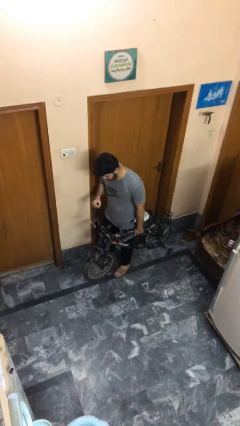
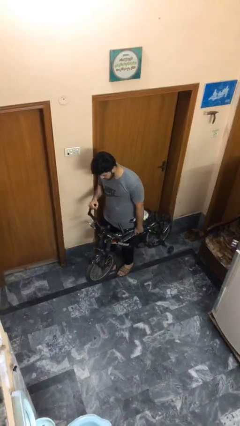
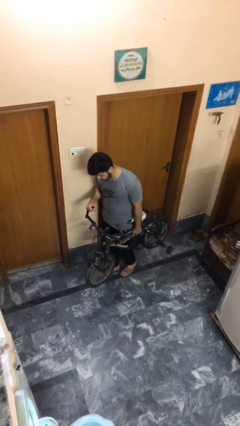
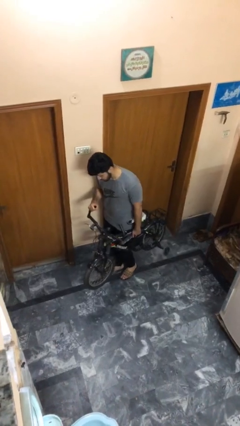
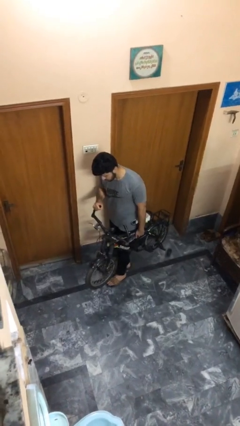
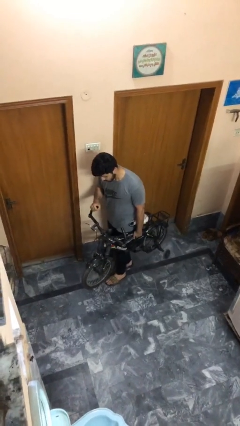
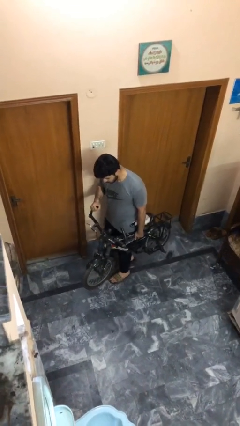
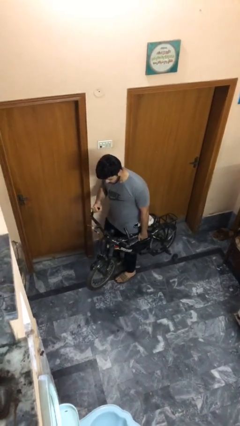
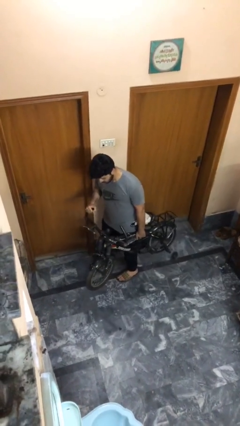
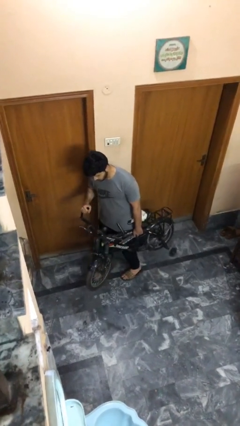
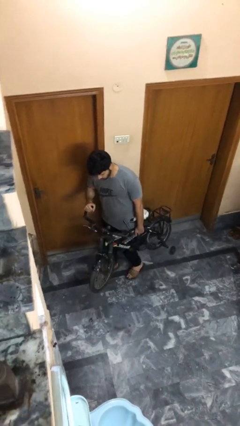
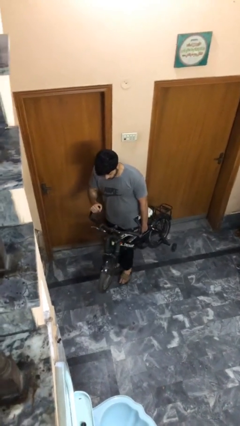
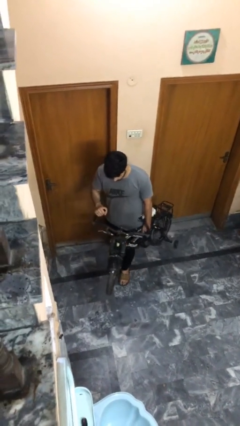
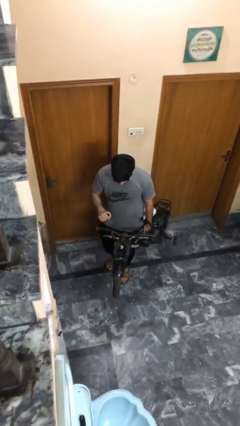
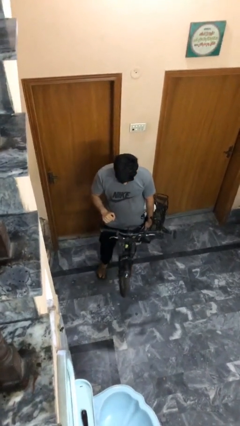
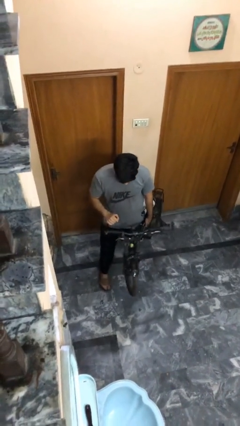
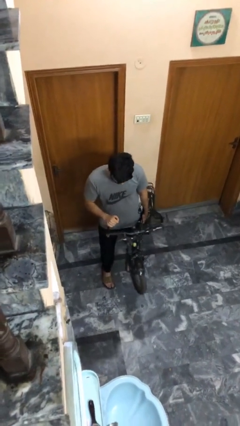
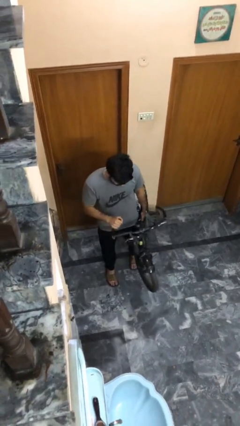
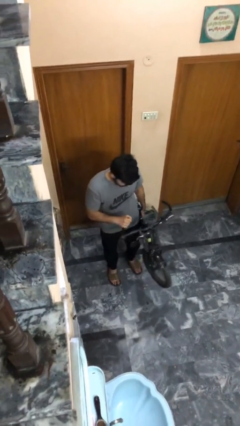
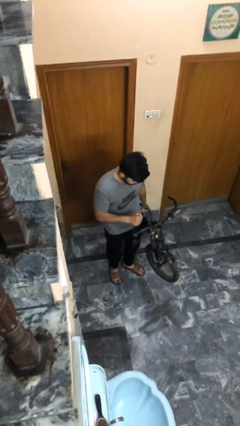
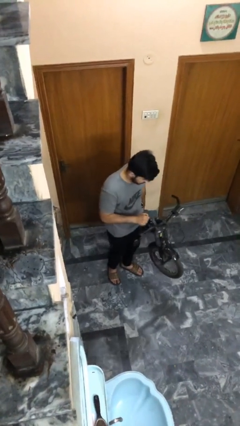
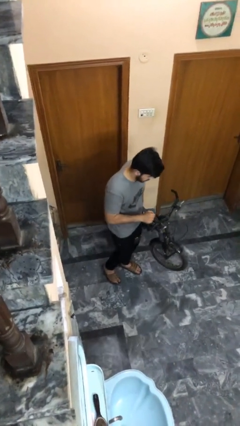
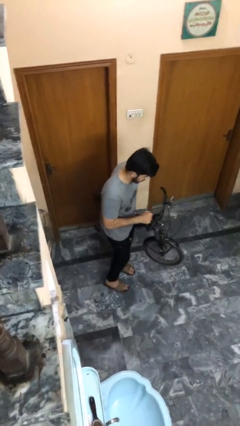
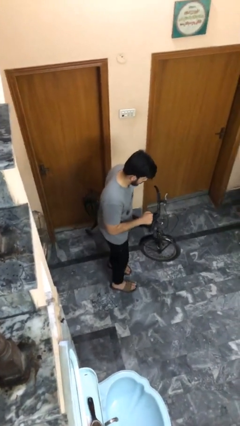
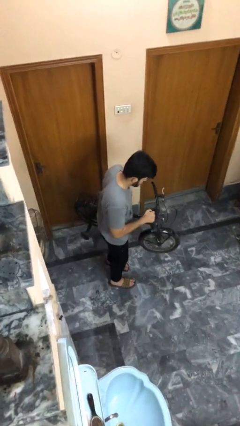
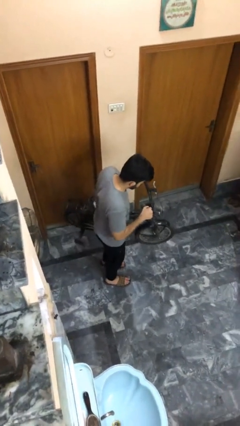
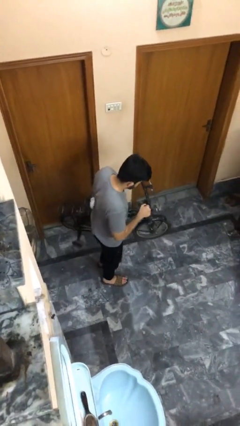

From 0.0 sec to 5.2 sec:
person carries bicycle

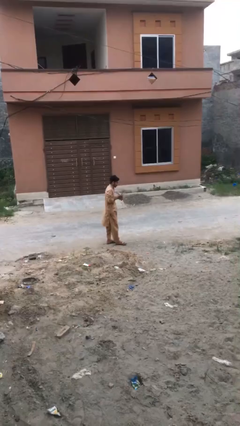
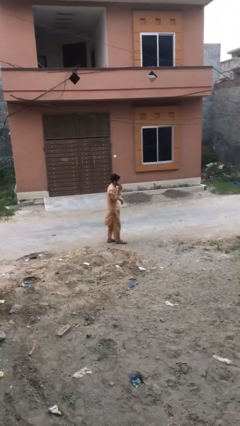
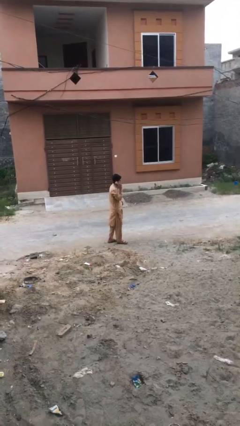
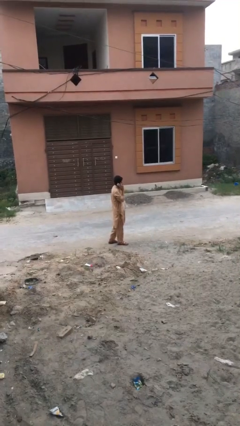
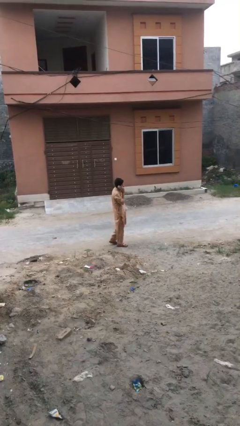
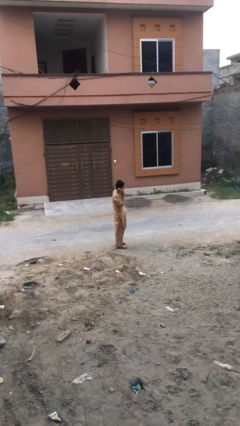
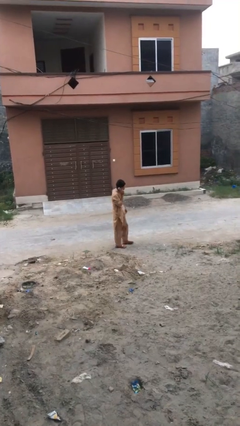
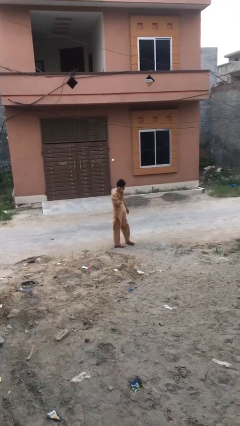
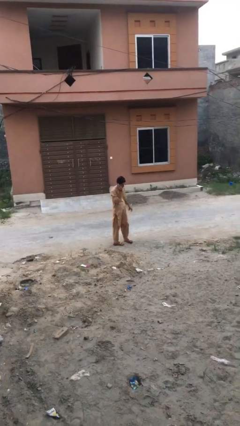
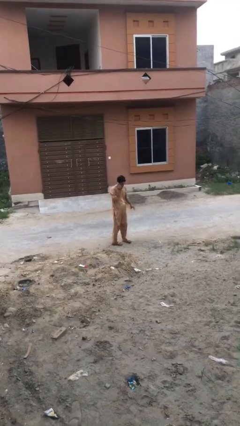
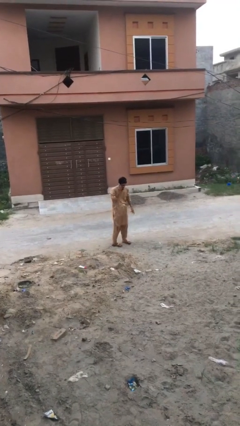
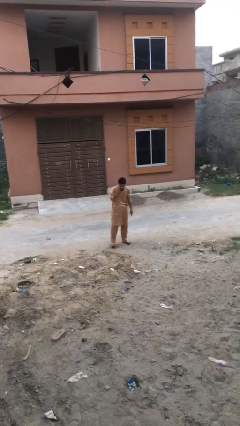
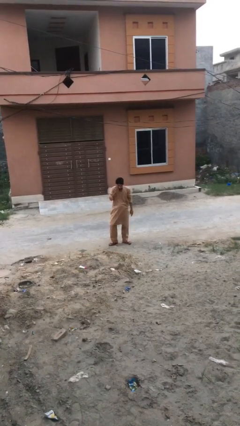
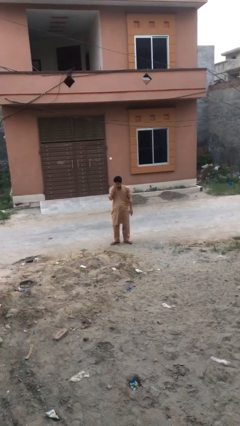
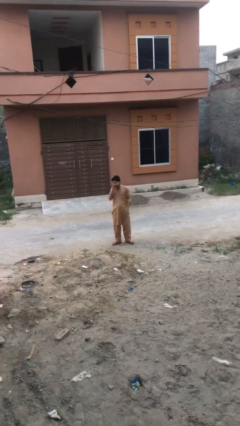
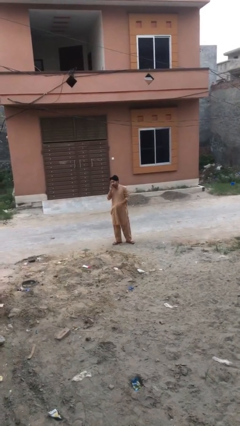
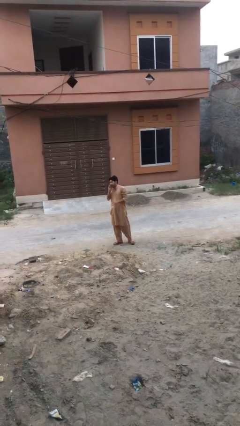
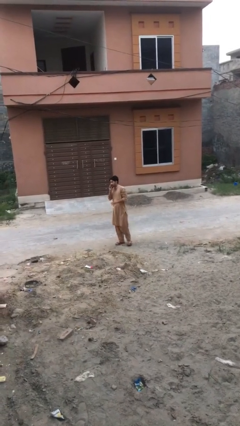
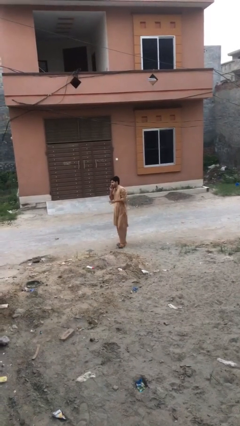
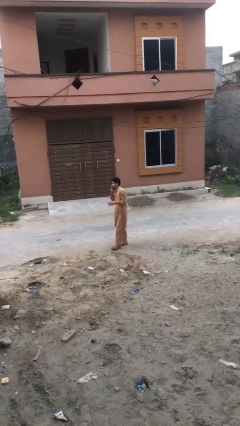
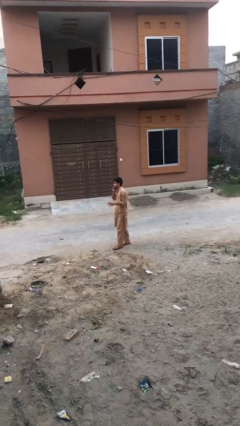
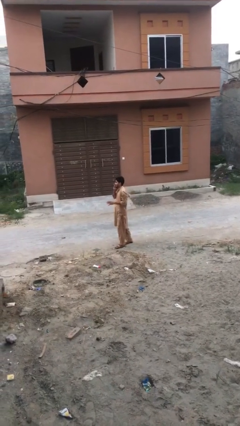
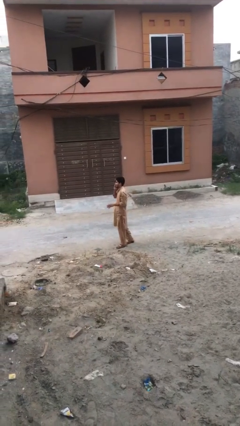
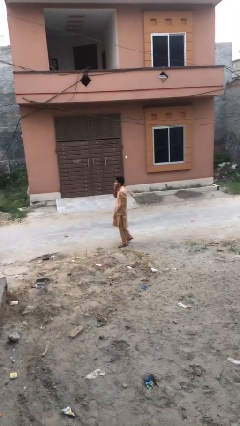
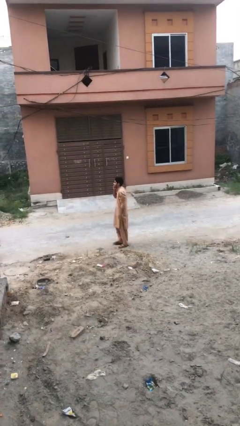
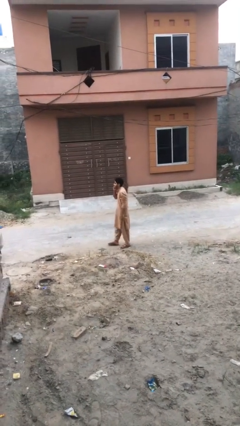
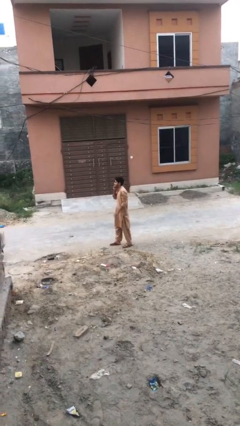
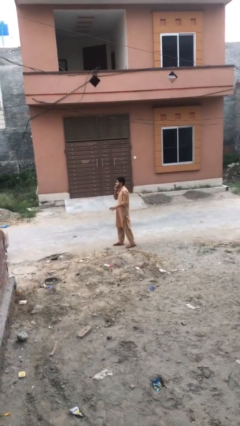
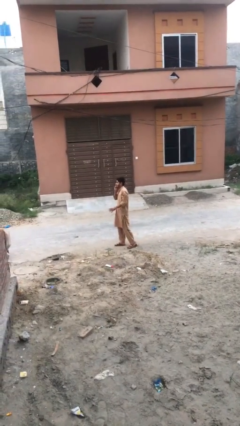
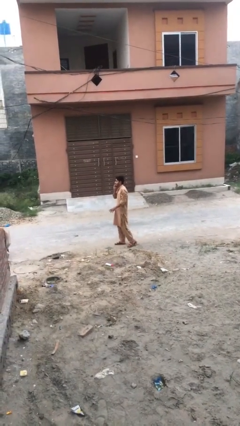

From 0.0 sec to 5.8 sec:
person talks on phone

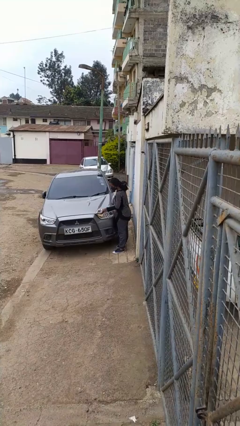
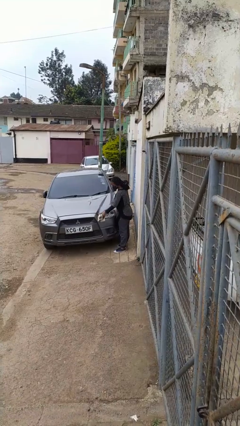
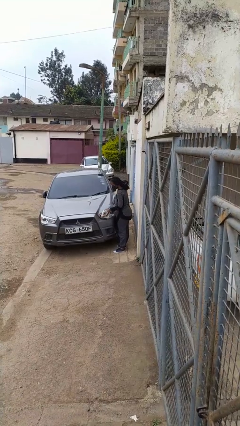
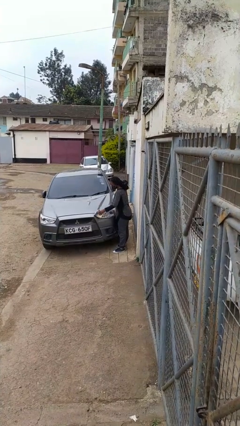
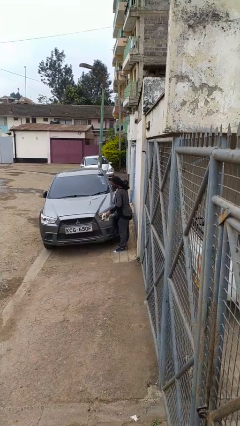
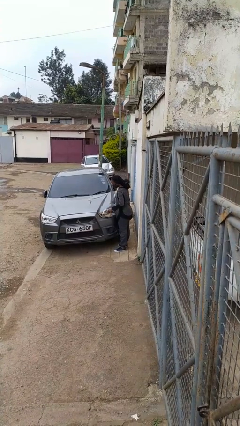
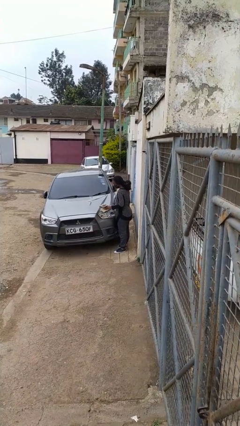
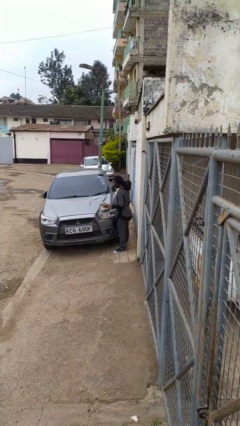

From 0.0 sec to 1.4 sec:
person polishes car with rag

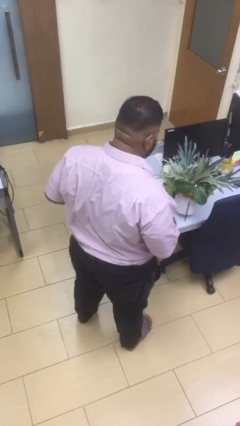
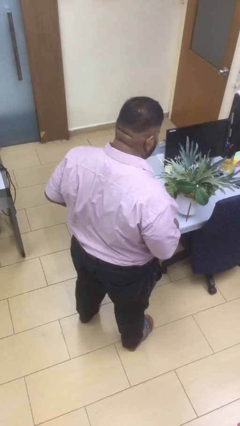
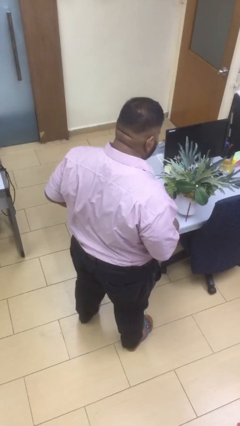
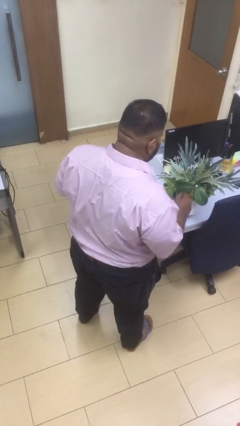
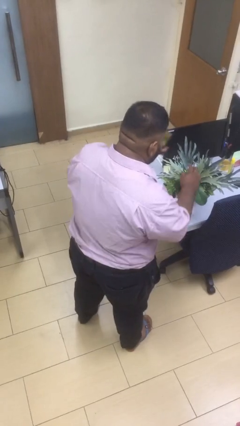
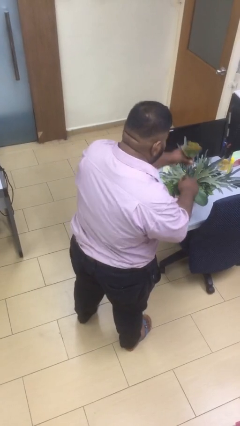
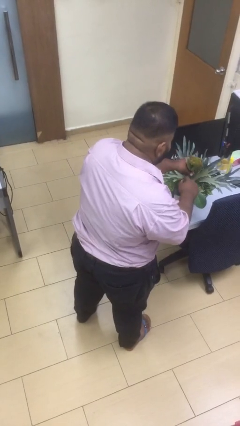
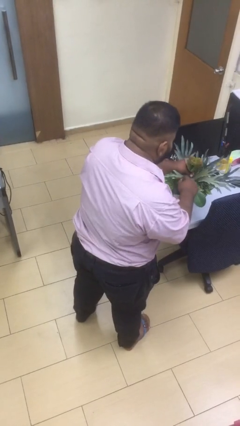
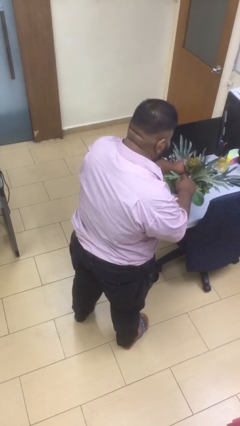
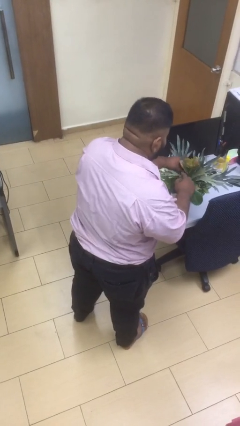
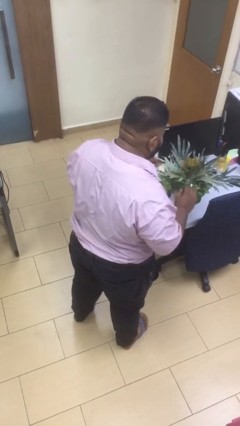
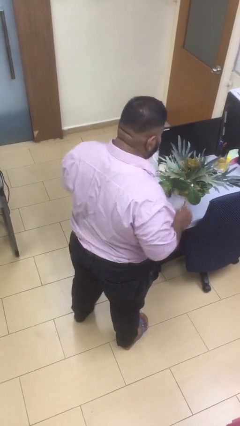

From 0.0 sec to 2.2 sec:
person arranges flowers in vase

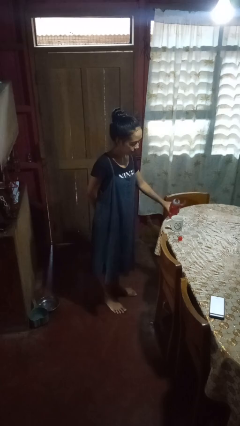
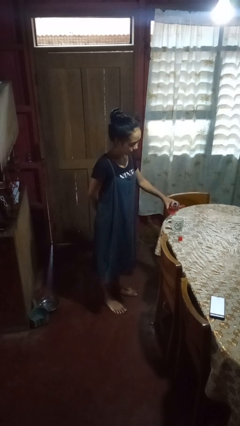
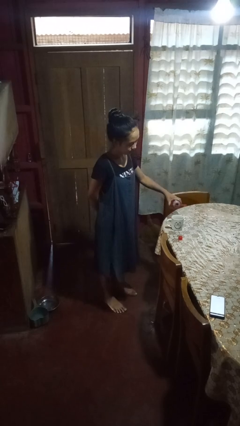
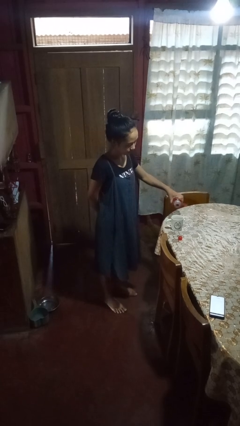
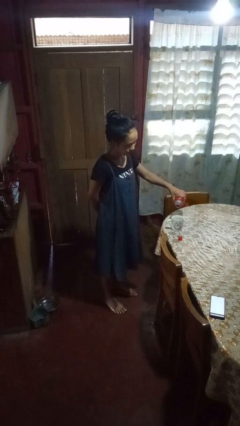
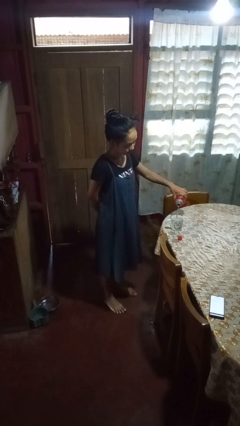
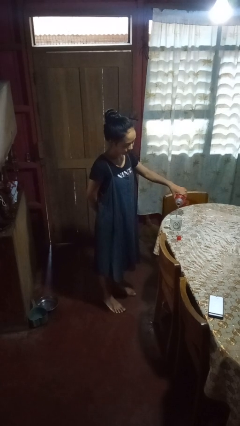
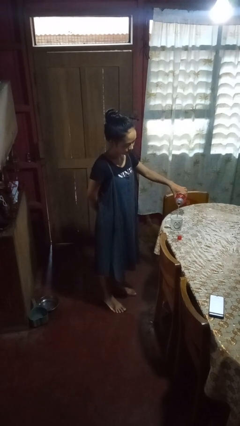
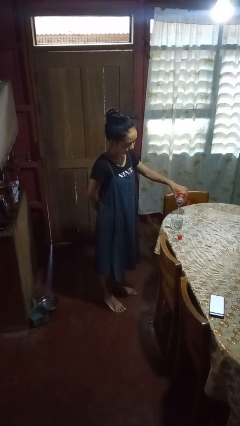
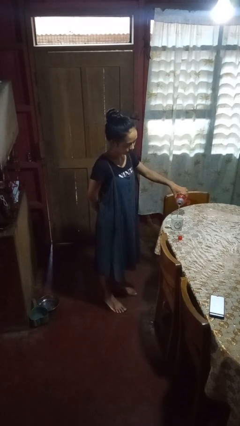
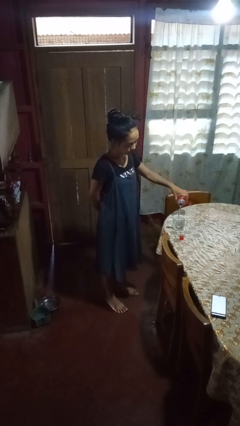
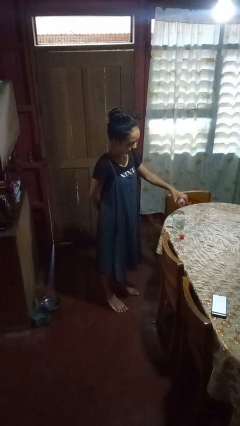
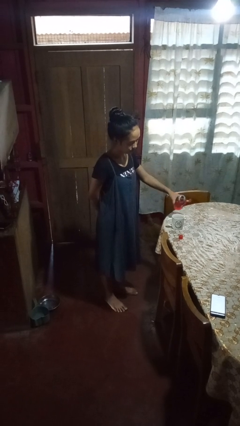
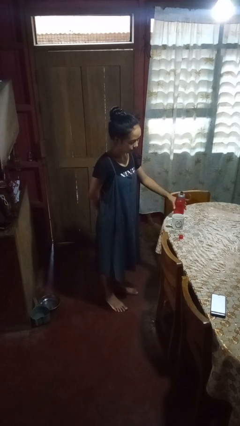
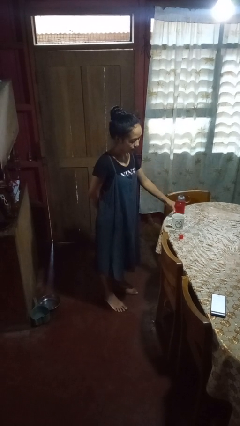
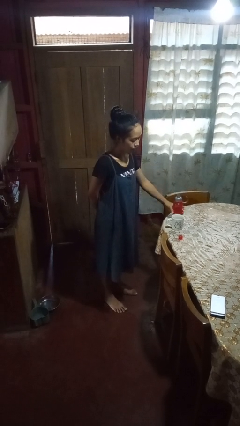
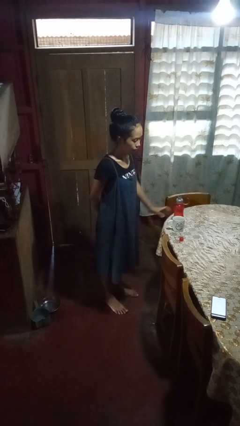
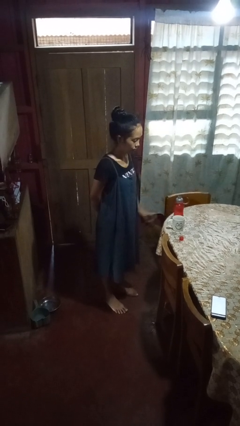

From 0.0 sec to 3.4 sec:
person pours liquid into cup
